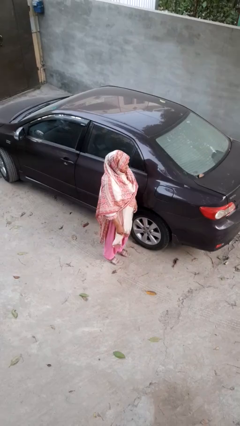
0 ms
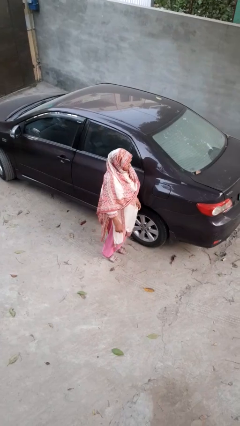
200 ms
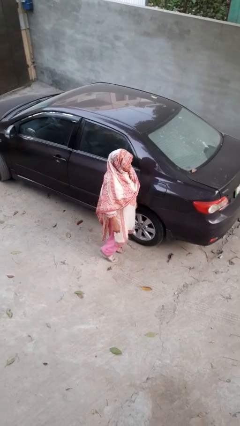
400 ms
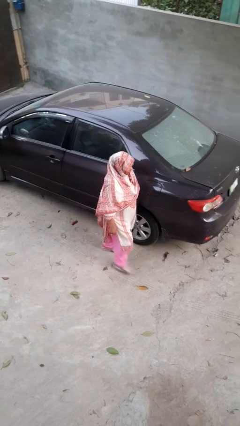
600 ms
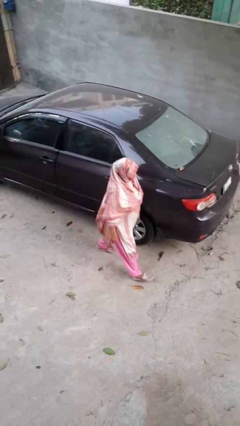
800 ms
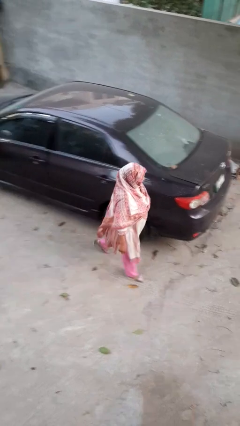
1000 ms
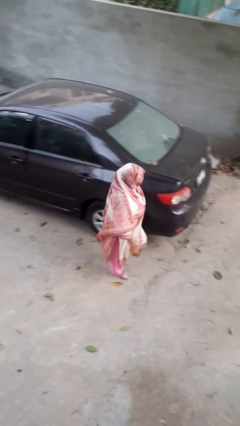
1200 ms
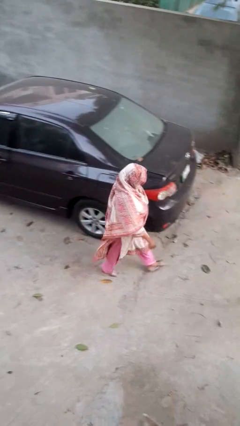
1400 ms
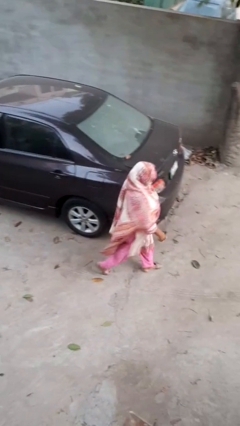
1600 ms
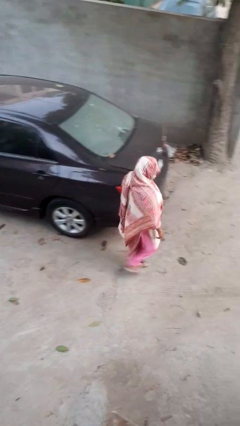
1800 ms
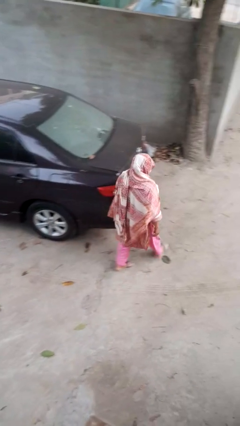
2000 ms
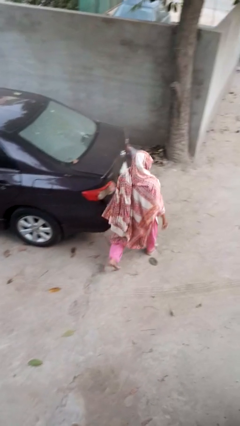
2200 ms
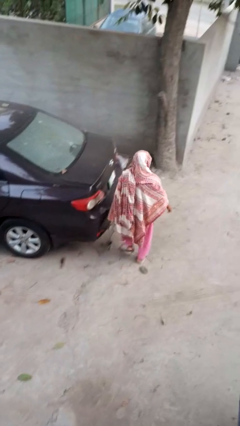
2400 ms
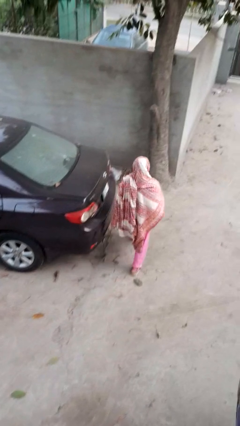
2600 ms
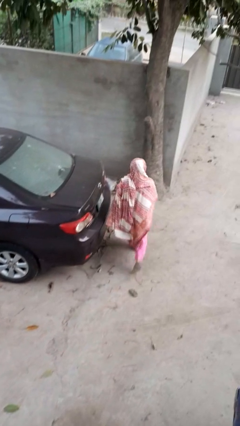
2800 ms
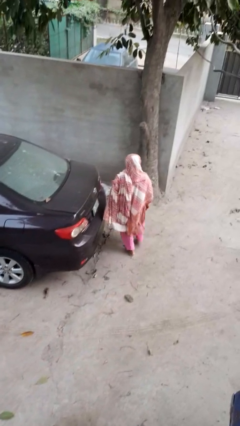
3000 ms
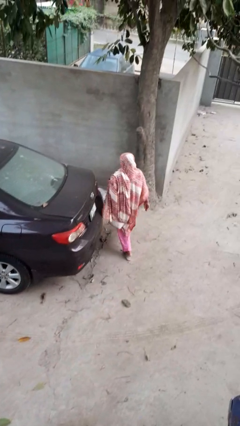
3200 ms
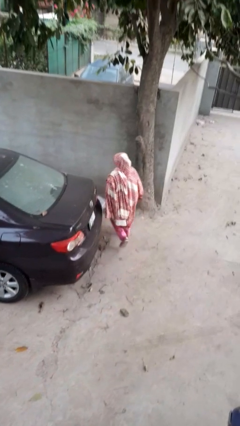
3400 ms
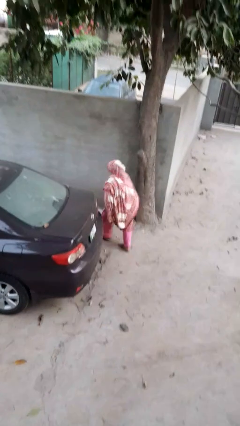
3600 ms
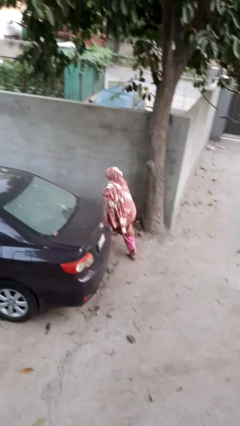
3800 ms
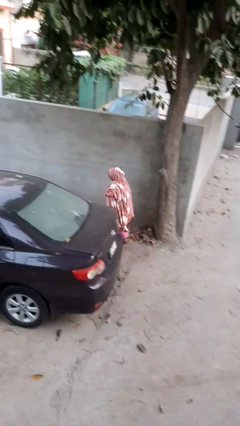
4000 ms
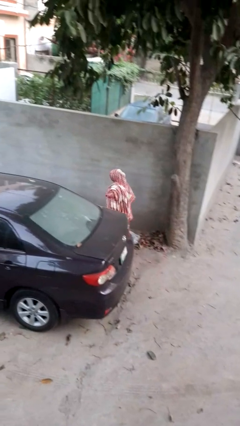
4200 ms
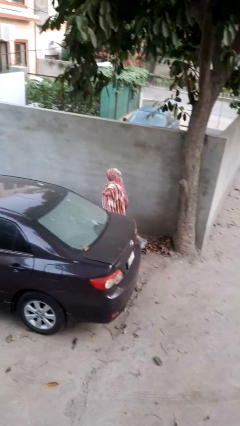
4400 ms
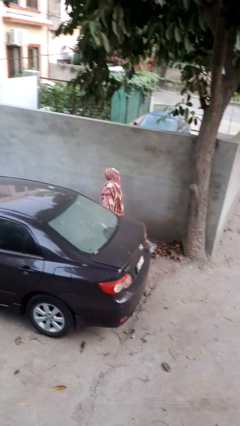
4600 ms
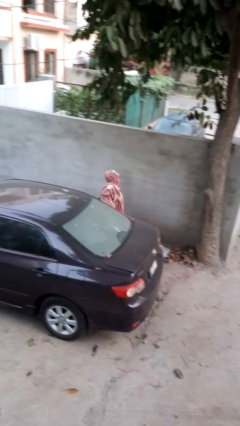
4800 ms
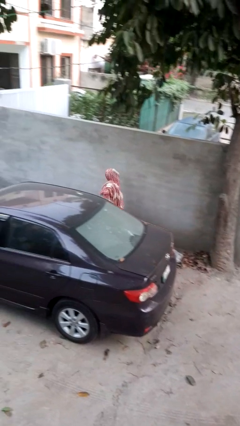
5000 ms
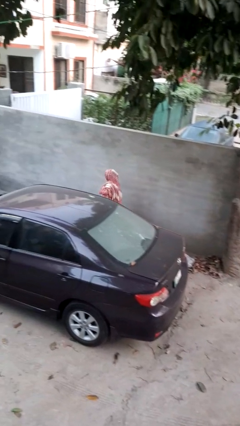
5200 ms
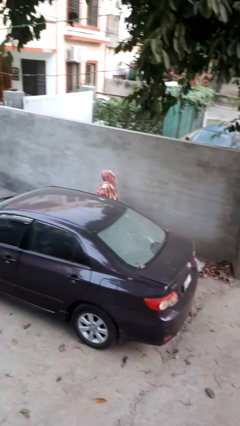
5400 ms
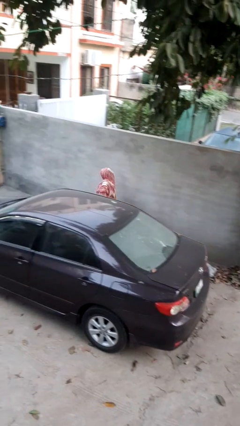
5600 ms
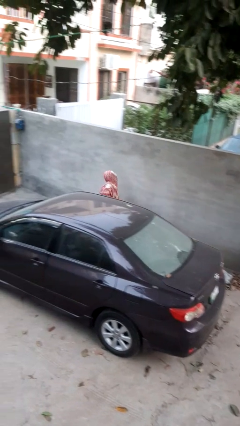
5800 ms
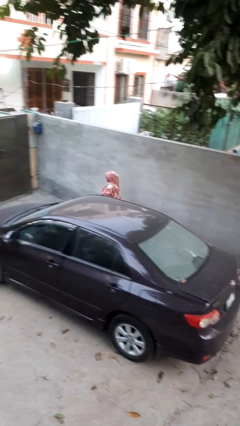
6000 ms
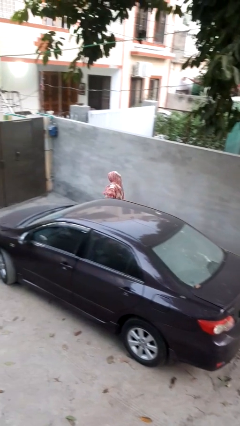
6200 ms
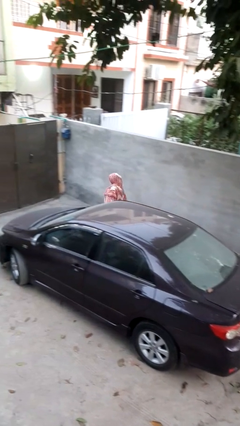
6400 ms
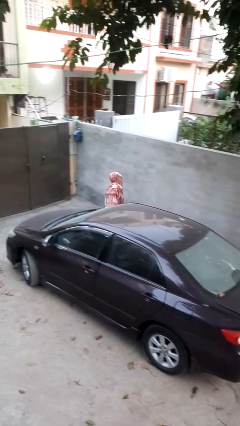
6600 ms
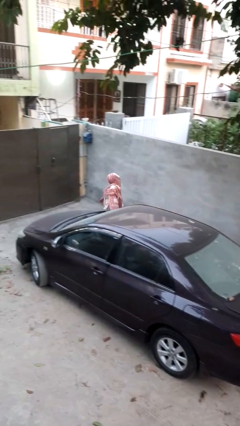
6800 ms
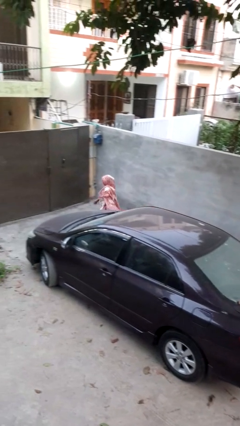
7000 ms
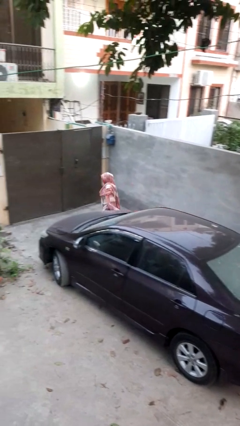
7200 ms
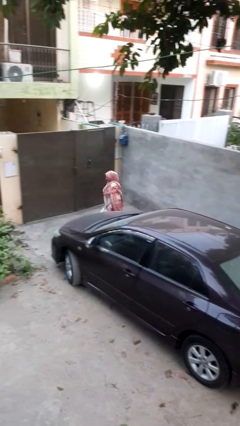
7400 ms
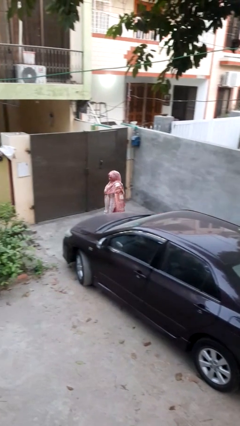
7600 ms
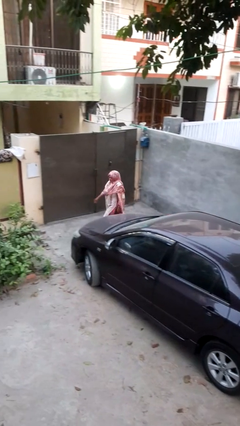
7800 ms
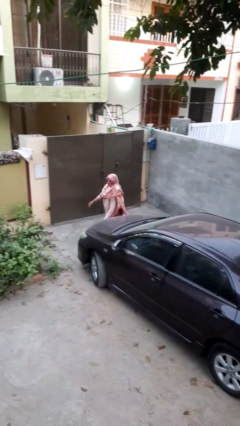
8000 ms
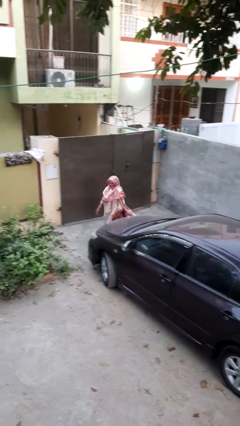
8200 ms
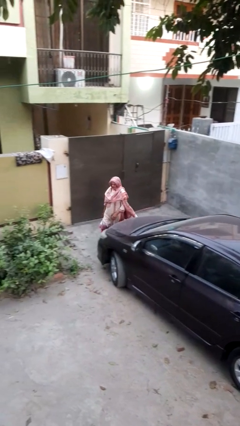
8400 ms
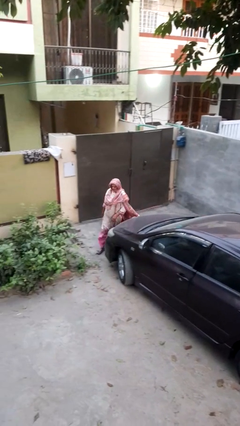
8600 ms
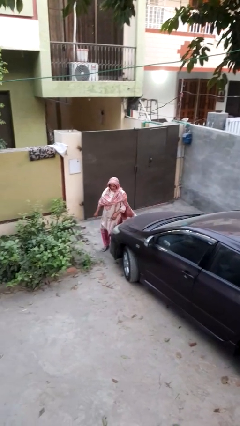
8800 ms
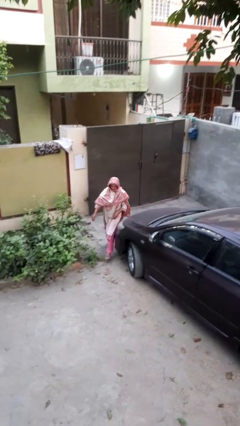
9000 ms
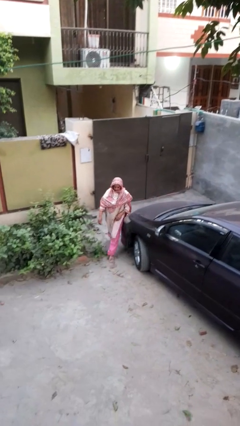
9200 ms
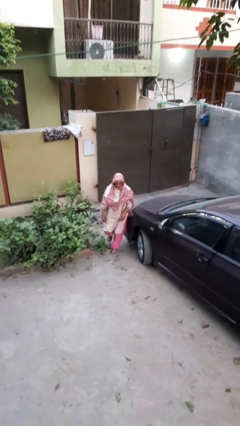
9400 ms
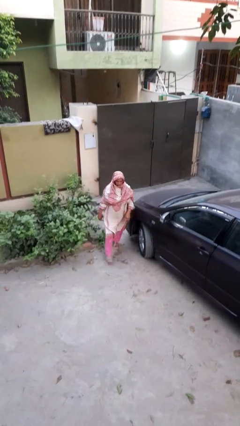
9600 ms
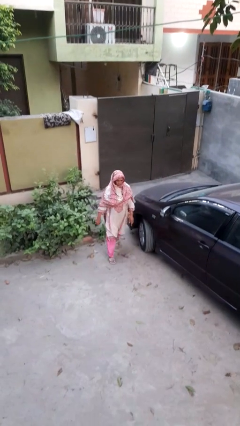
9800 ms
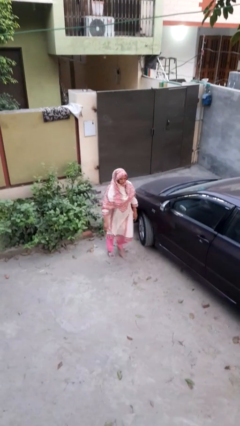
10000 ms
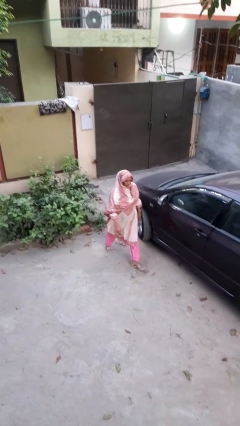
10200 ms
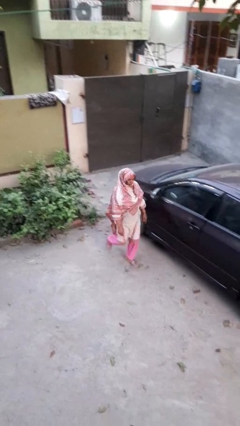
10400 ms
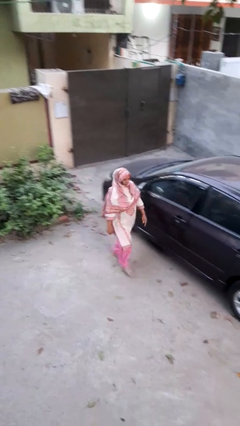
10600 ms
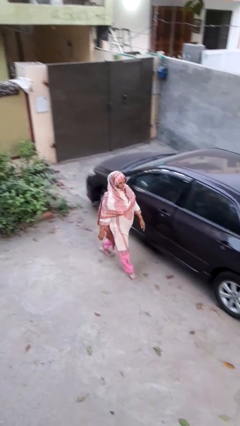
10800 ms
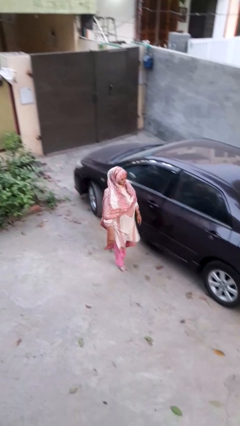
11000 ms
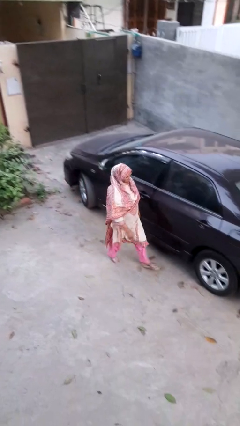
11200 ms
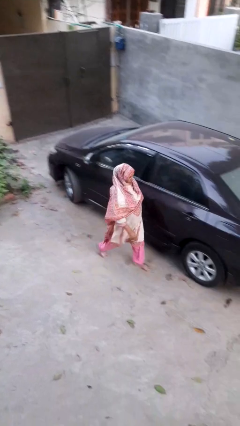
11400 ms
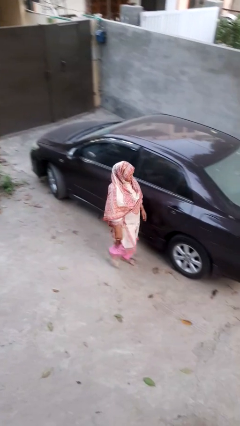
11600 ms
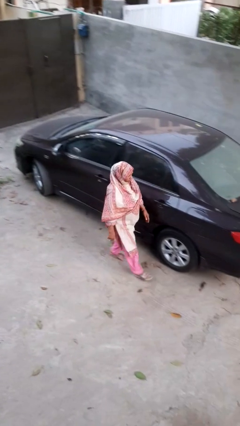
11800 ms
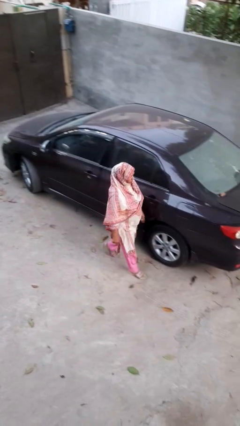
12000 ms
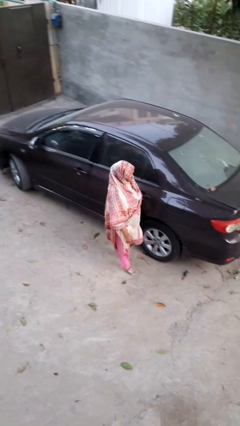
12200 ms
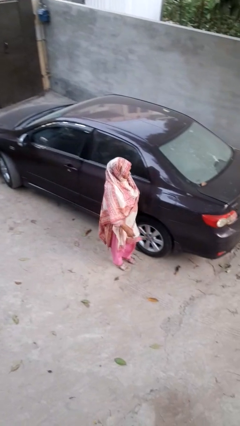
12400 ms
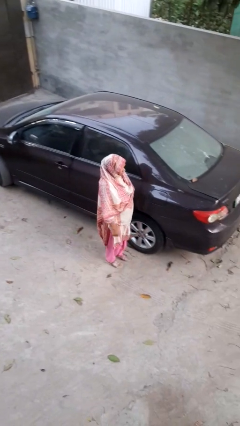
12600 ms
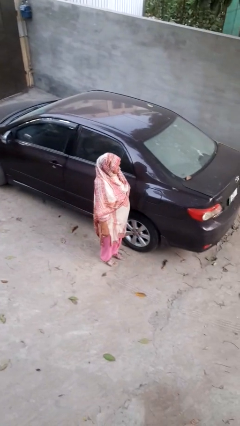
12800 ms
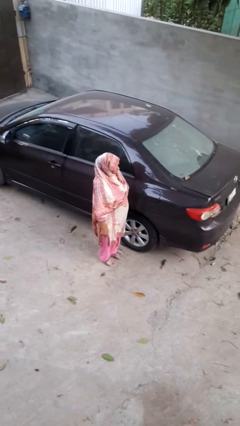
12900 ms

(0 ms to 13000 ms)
person walks around car

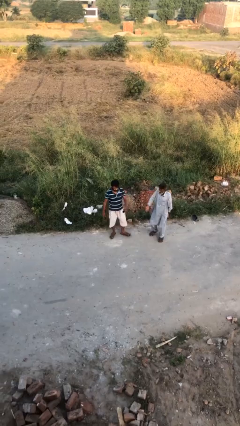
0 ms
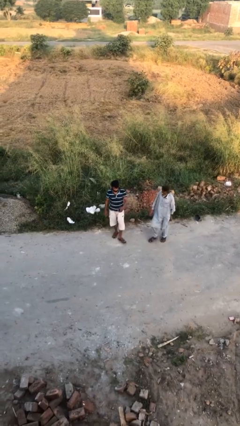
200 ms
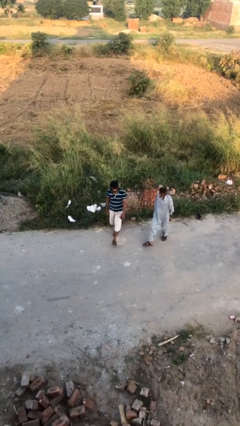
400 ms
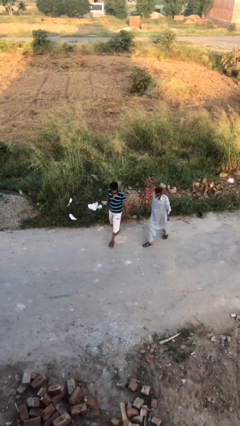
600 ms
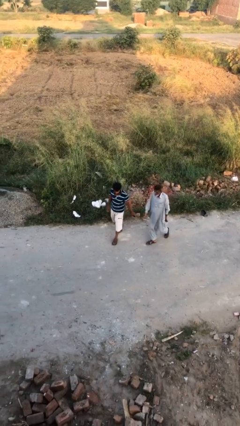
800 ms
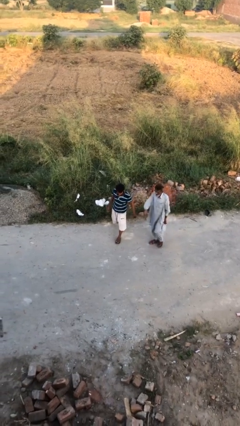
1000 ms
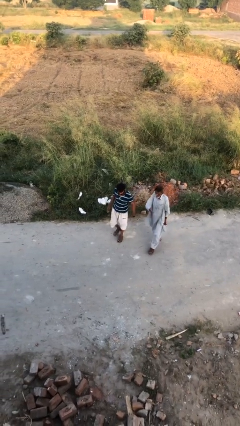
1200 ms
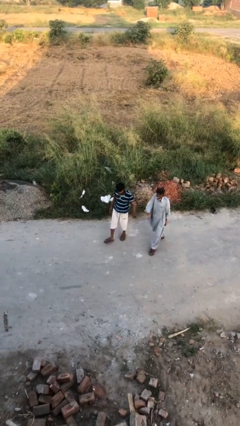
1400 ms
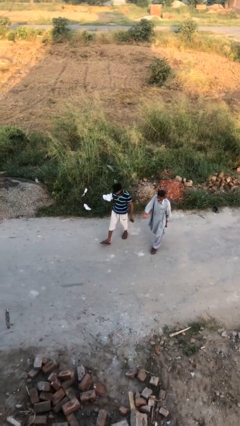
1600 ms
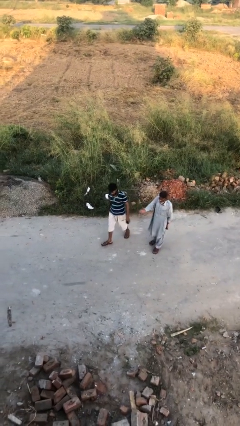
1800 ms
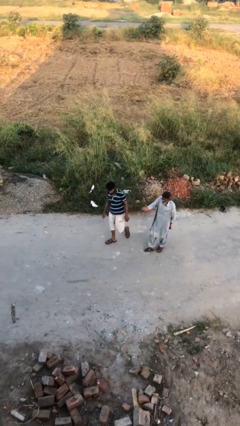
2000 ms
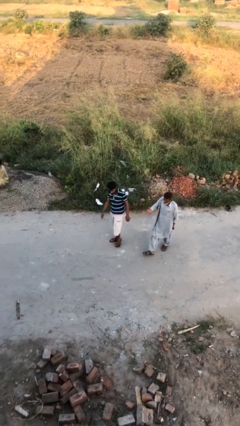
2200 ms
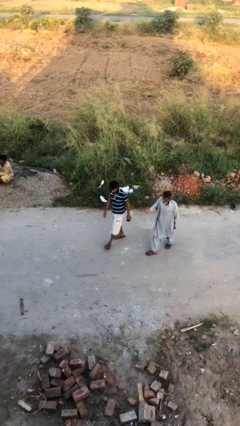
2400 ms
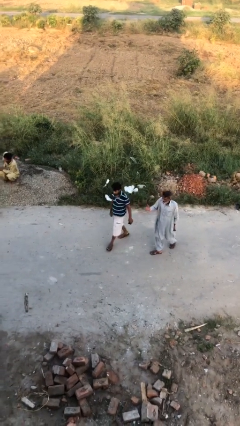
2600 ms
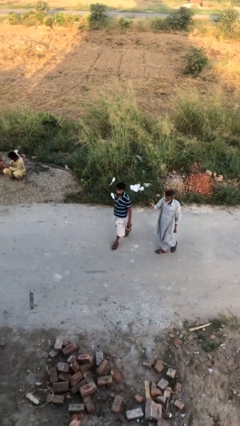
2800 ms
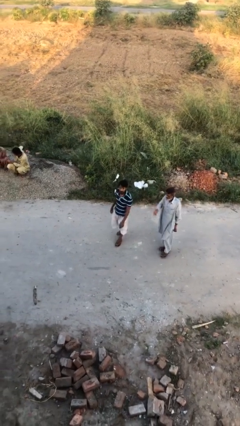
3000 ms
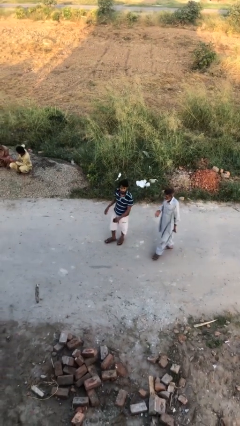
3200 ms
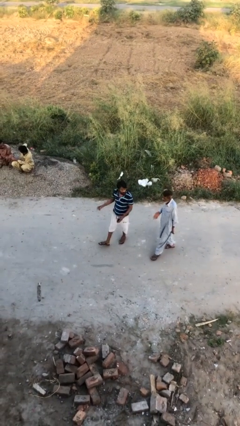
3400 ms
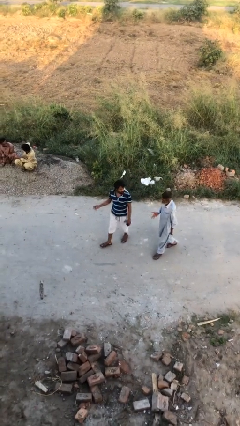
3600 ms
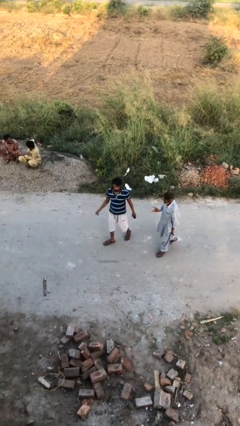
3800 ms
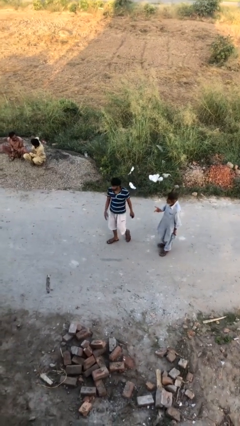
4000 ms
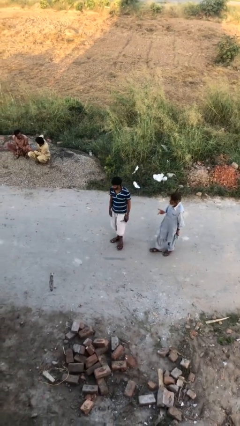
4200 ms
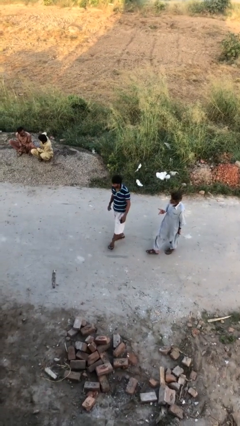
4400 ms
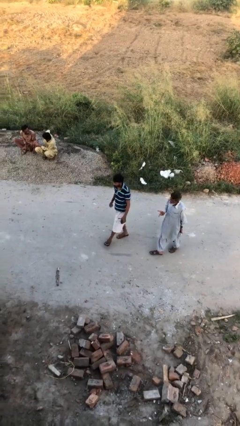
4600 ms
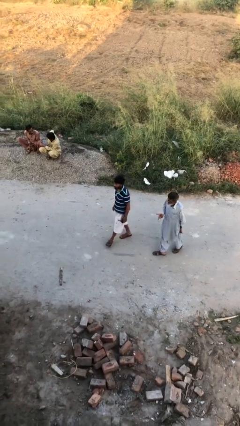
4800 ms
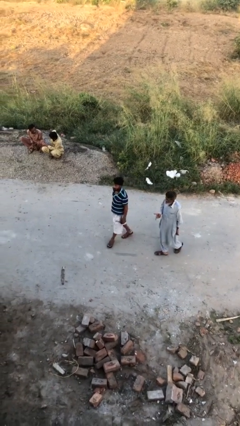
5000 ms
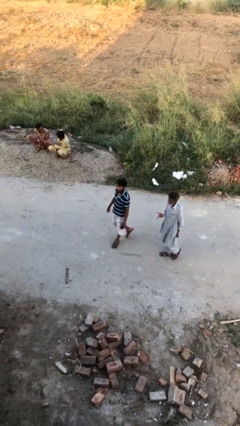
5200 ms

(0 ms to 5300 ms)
person talks to person

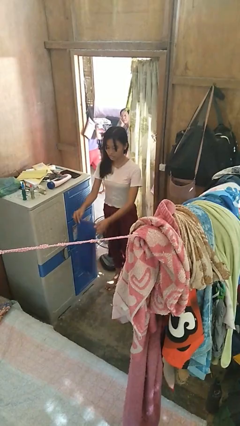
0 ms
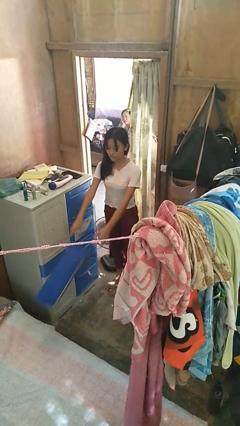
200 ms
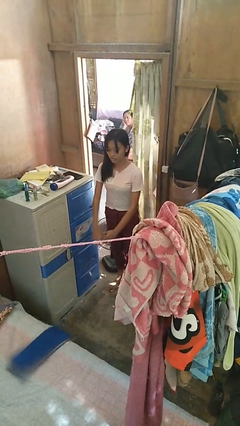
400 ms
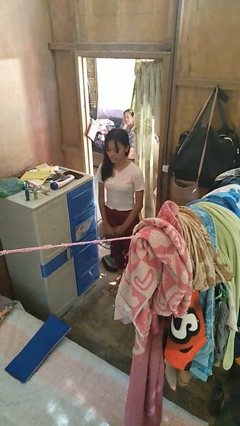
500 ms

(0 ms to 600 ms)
person throws object on bed
